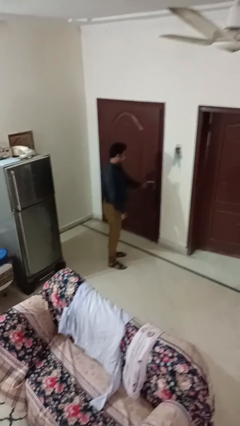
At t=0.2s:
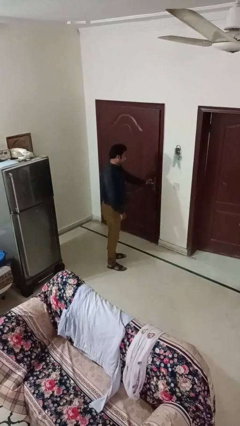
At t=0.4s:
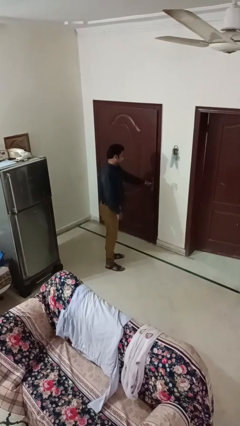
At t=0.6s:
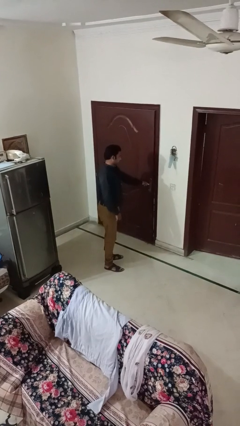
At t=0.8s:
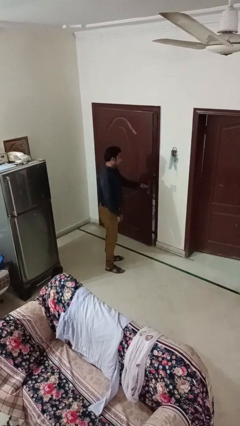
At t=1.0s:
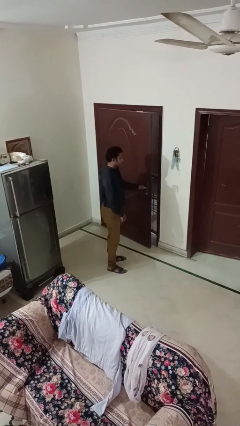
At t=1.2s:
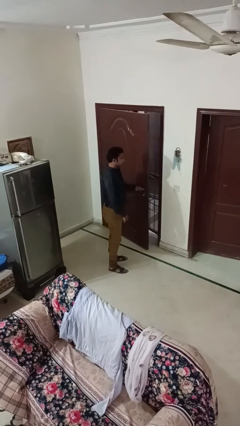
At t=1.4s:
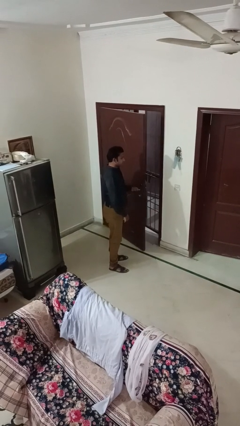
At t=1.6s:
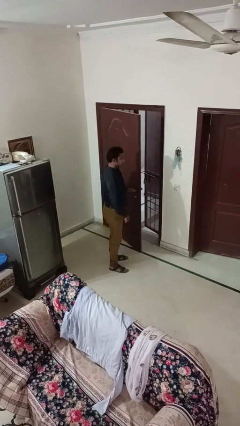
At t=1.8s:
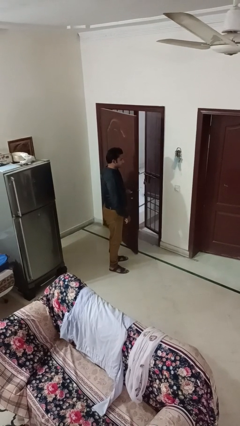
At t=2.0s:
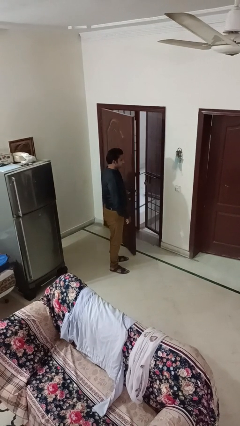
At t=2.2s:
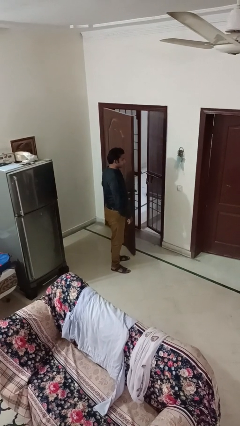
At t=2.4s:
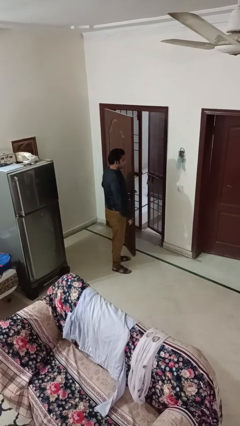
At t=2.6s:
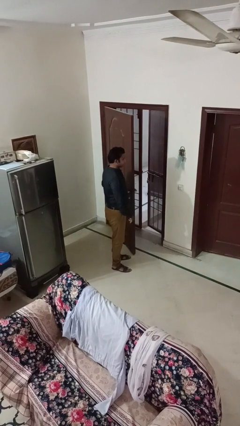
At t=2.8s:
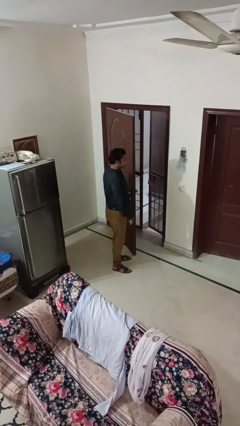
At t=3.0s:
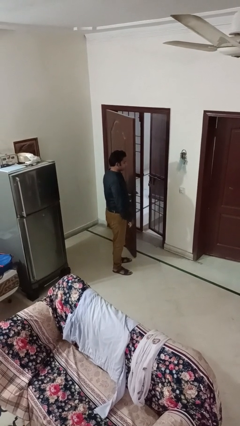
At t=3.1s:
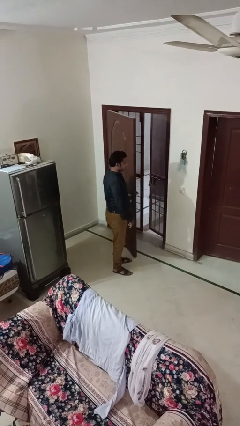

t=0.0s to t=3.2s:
person opens facility door

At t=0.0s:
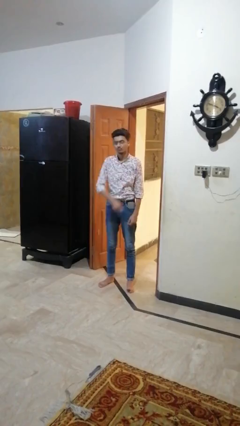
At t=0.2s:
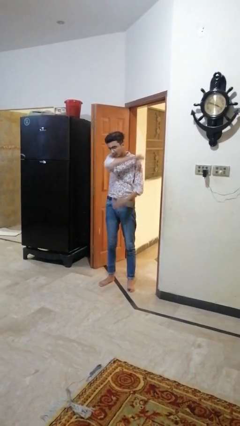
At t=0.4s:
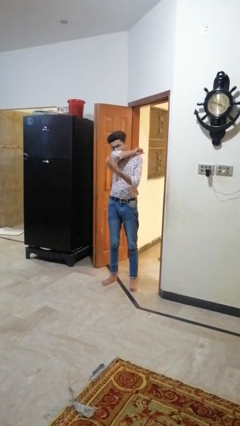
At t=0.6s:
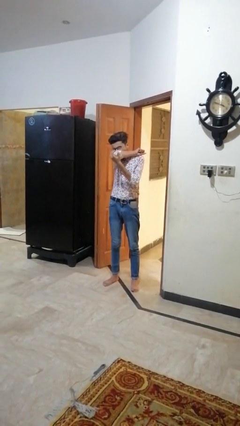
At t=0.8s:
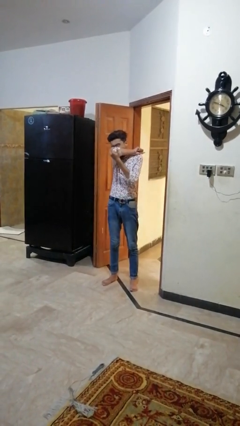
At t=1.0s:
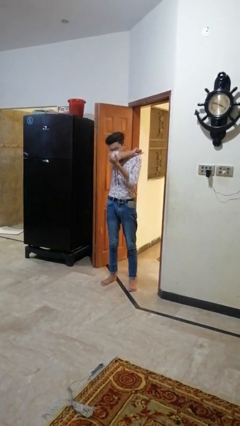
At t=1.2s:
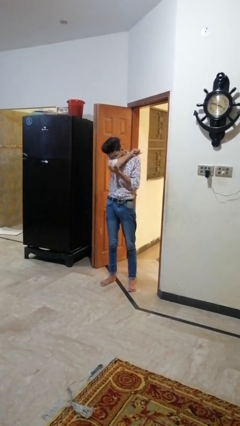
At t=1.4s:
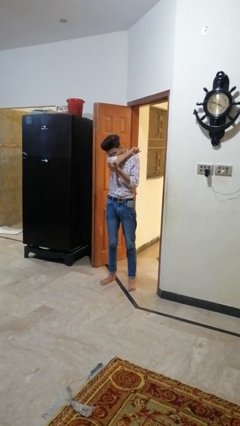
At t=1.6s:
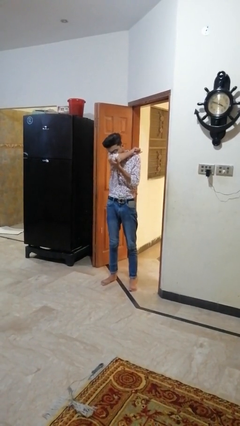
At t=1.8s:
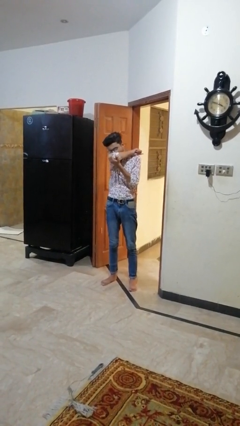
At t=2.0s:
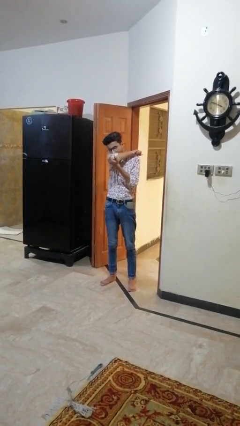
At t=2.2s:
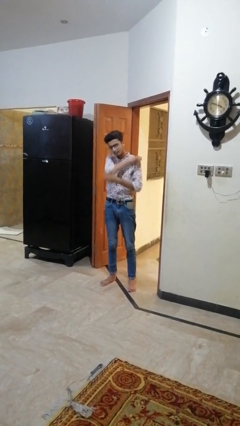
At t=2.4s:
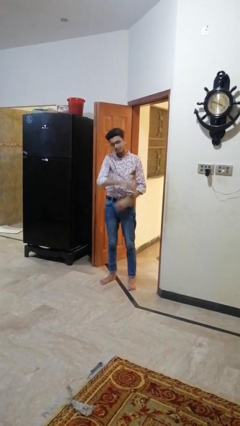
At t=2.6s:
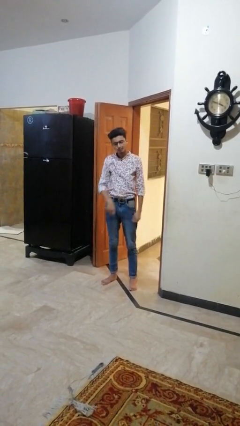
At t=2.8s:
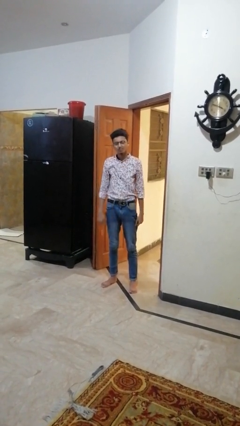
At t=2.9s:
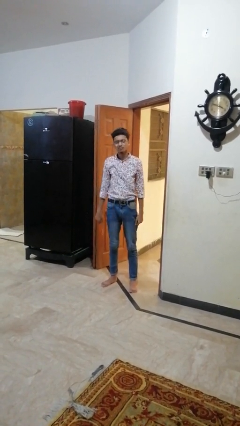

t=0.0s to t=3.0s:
person sneezes into arm

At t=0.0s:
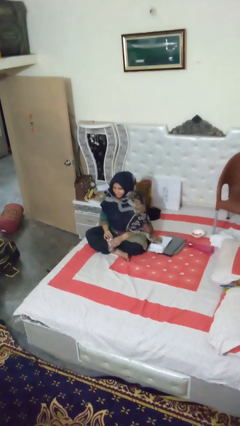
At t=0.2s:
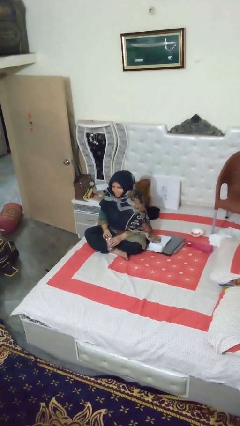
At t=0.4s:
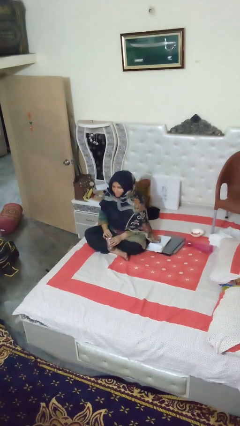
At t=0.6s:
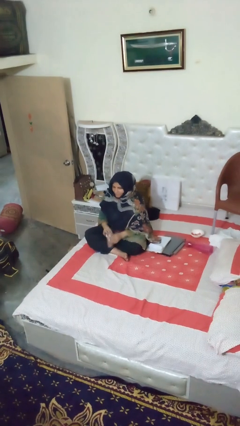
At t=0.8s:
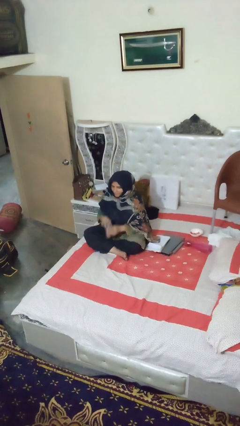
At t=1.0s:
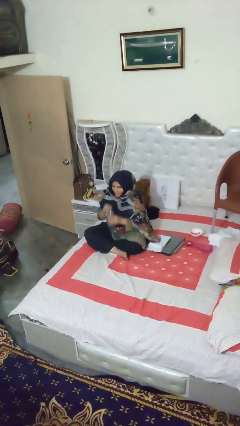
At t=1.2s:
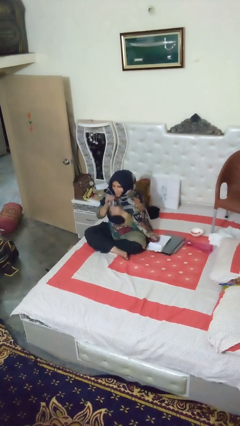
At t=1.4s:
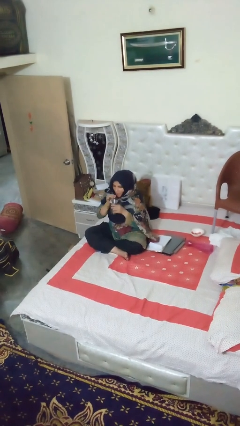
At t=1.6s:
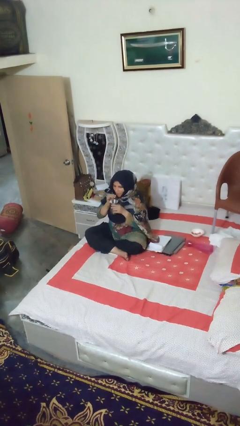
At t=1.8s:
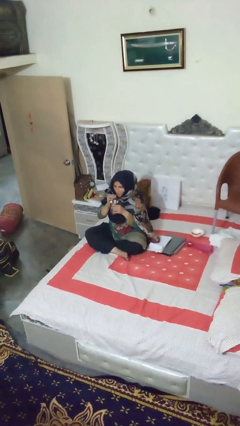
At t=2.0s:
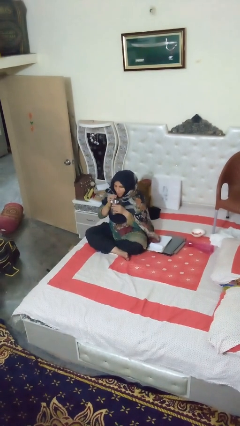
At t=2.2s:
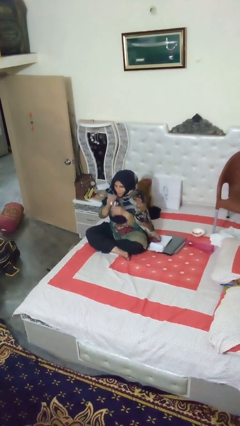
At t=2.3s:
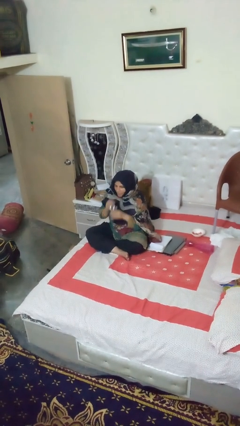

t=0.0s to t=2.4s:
person drinks from straw

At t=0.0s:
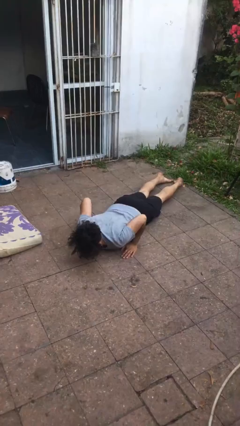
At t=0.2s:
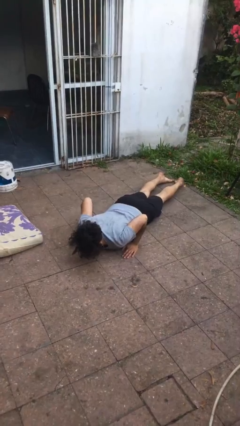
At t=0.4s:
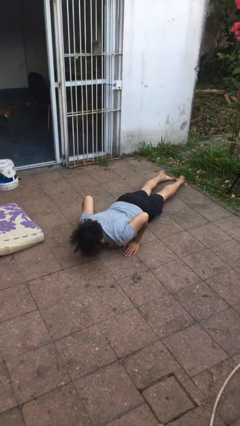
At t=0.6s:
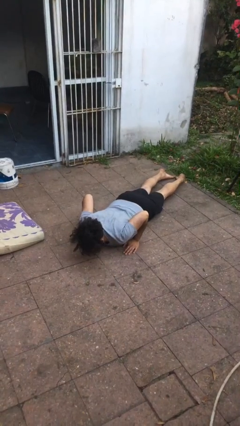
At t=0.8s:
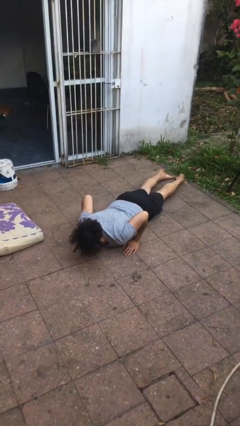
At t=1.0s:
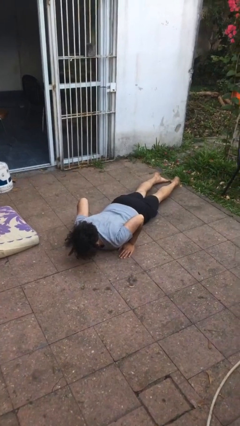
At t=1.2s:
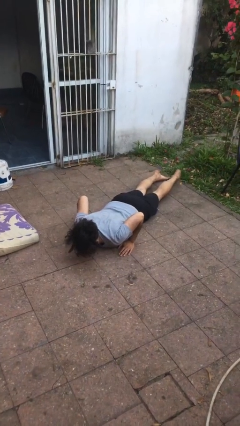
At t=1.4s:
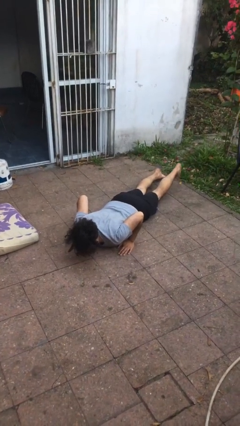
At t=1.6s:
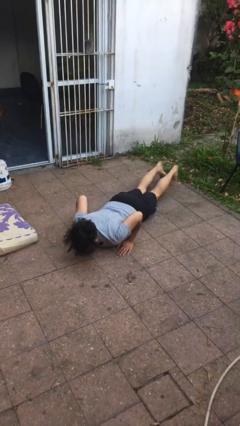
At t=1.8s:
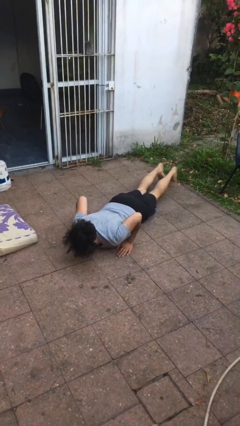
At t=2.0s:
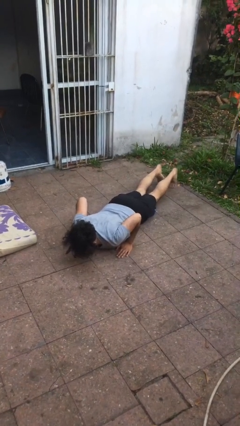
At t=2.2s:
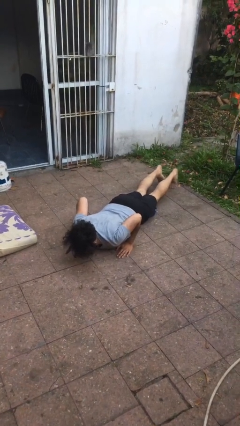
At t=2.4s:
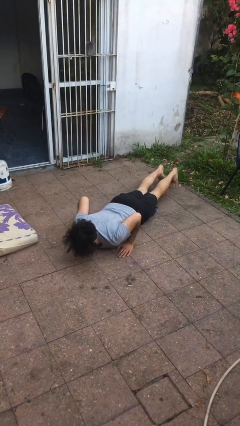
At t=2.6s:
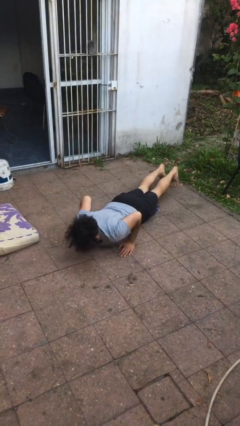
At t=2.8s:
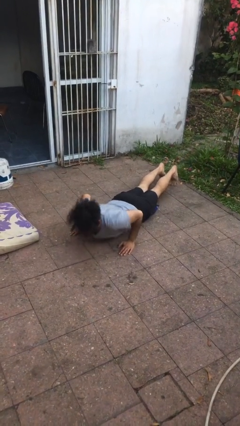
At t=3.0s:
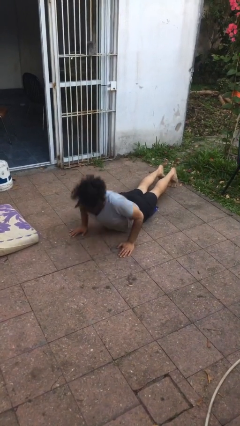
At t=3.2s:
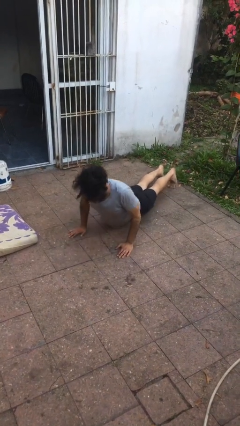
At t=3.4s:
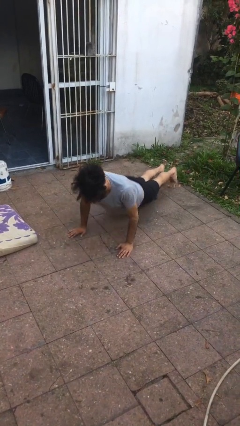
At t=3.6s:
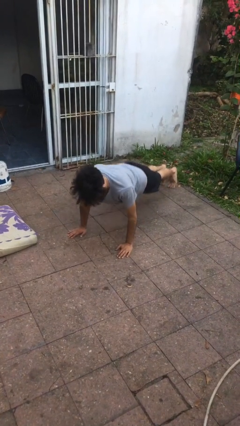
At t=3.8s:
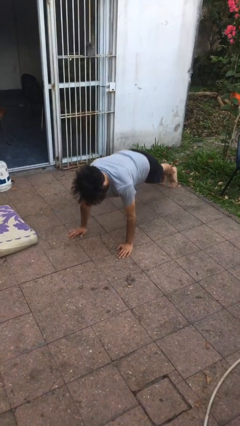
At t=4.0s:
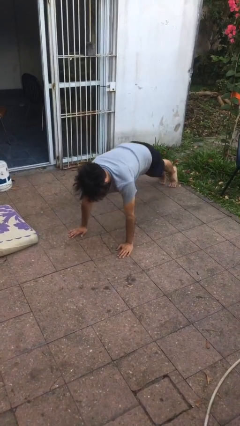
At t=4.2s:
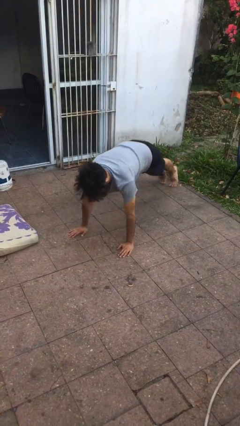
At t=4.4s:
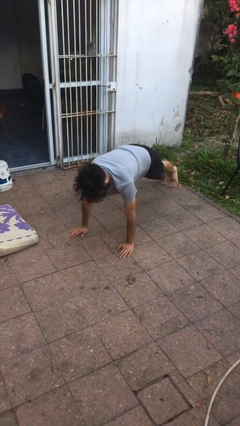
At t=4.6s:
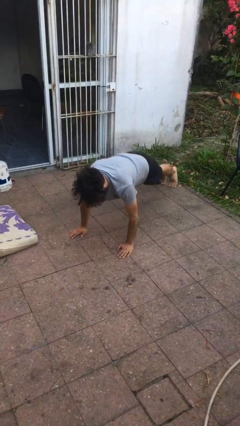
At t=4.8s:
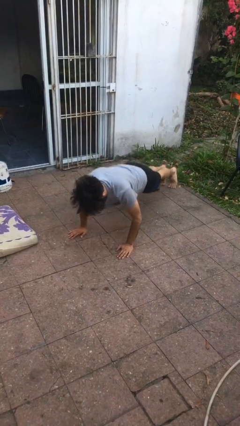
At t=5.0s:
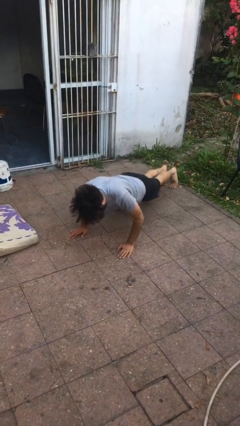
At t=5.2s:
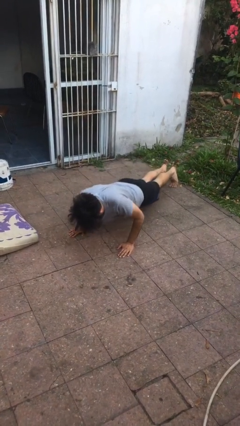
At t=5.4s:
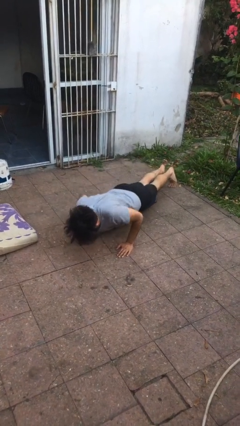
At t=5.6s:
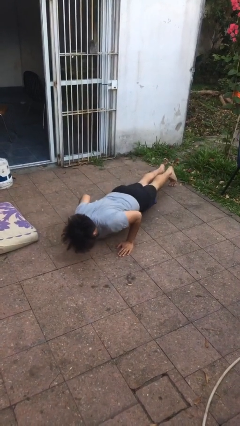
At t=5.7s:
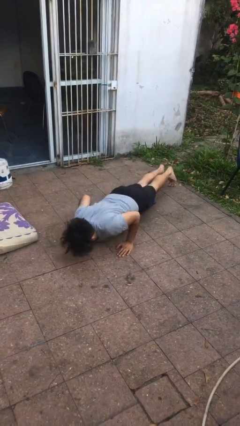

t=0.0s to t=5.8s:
person exercises with pushup

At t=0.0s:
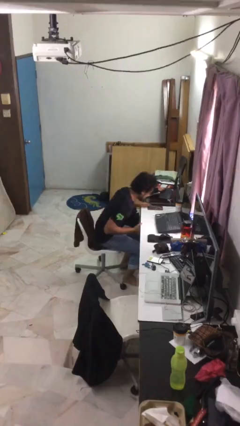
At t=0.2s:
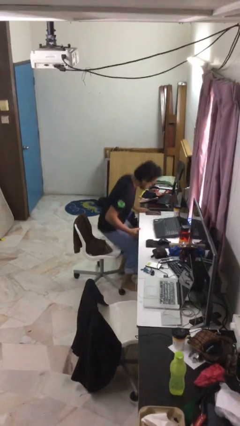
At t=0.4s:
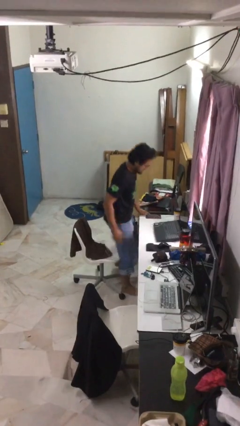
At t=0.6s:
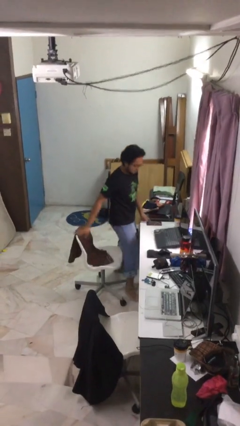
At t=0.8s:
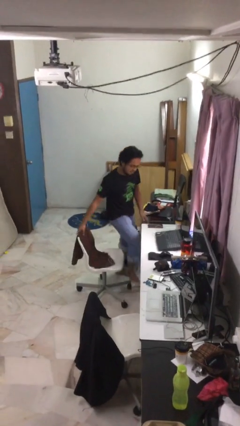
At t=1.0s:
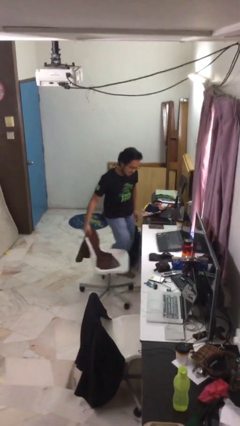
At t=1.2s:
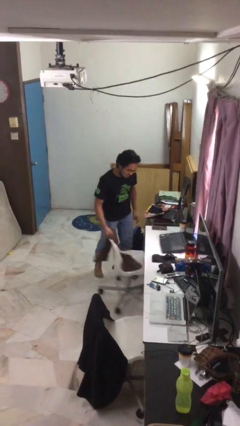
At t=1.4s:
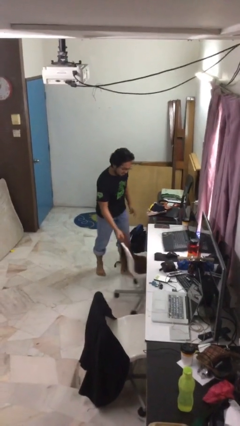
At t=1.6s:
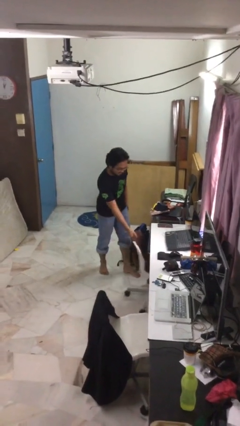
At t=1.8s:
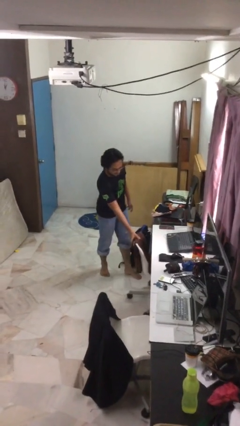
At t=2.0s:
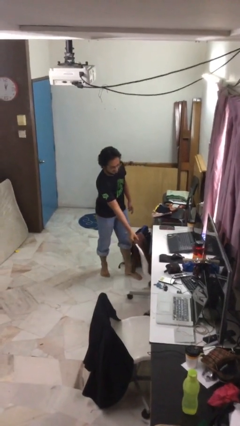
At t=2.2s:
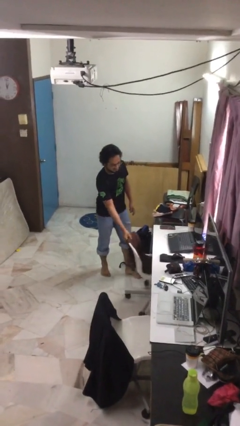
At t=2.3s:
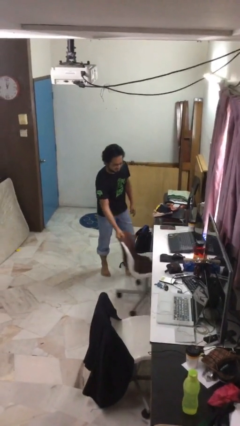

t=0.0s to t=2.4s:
person stands up

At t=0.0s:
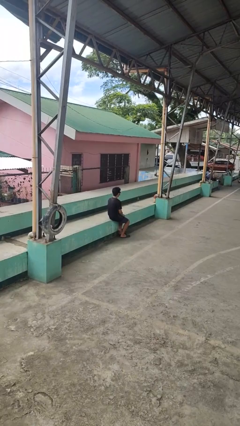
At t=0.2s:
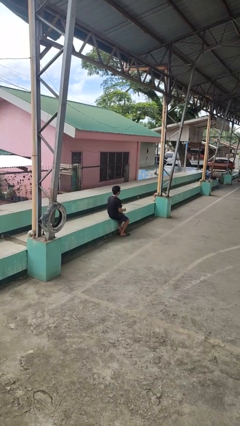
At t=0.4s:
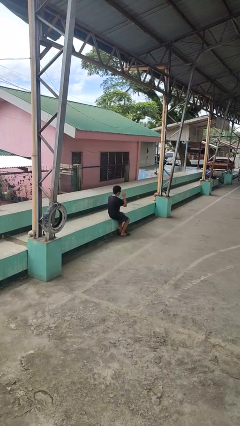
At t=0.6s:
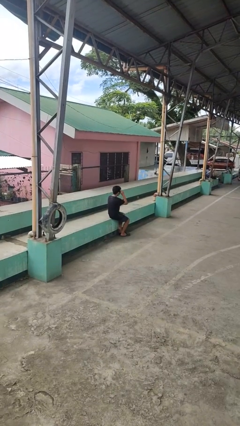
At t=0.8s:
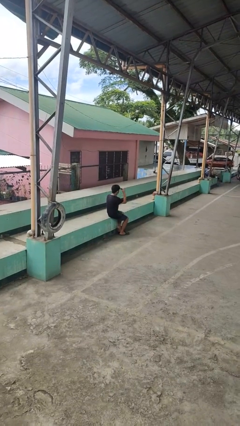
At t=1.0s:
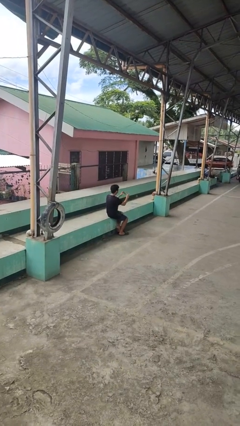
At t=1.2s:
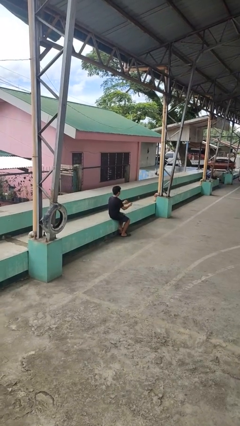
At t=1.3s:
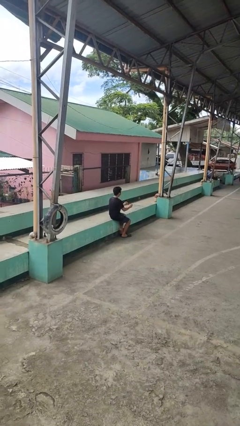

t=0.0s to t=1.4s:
person takes off sunglasses
